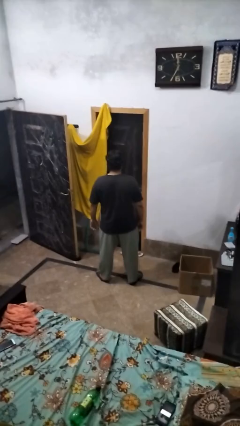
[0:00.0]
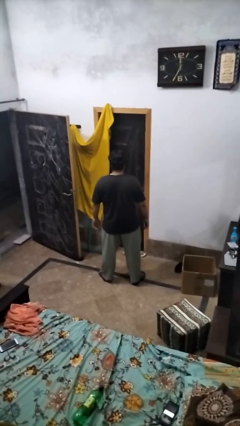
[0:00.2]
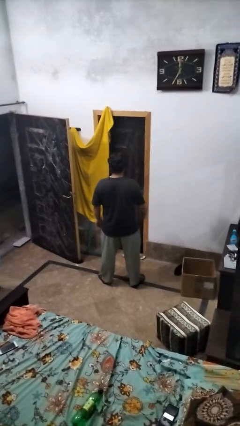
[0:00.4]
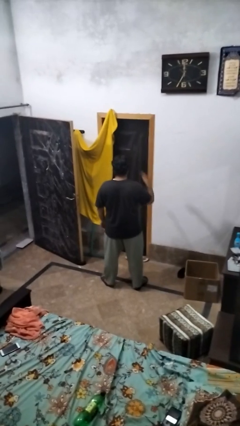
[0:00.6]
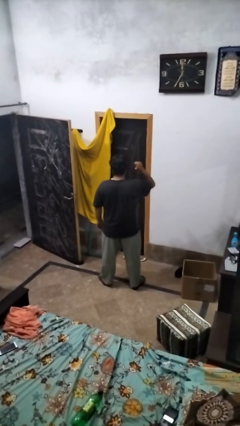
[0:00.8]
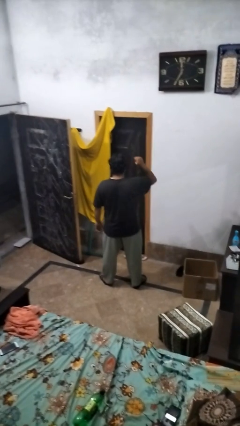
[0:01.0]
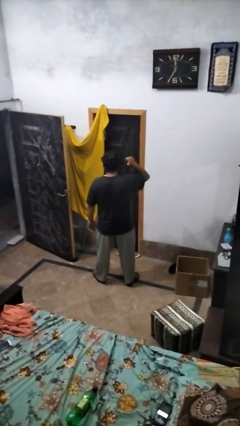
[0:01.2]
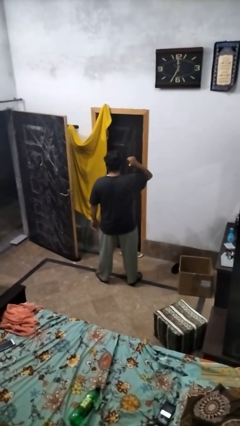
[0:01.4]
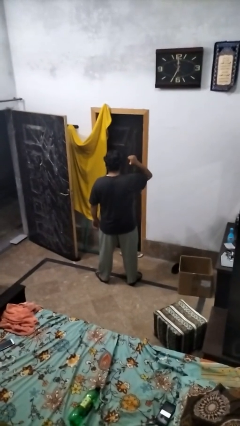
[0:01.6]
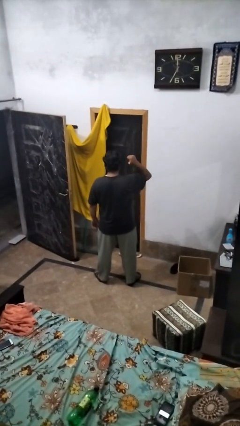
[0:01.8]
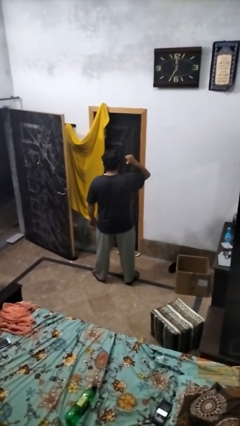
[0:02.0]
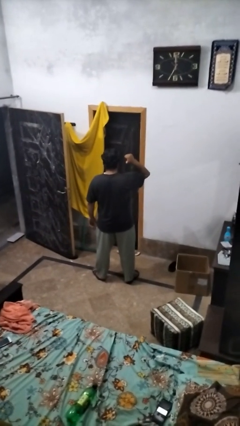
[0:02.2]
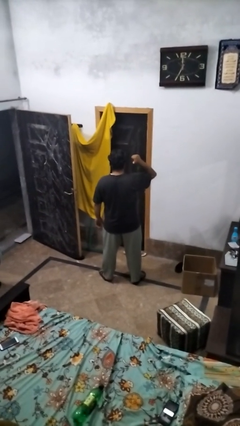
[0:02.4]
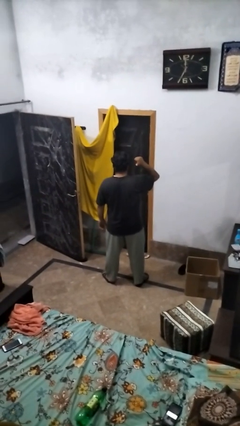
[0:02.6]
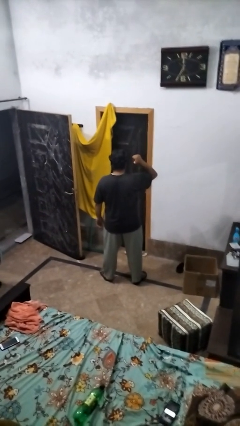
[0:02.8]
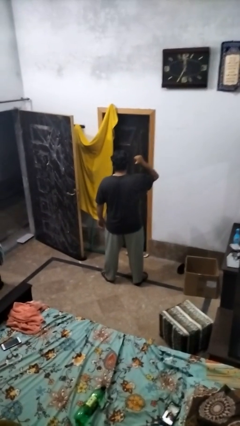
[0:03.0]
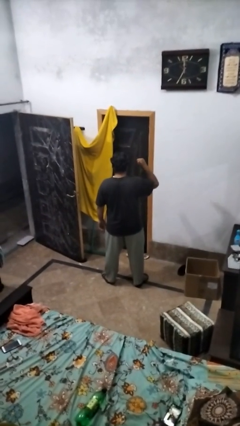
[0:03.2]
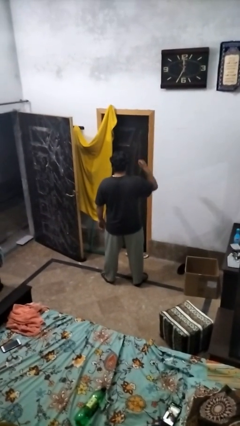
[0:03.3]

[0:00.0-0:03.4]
person gestures behind me

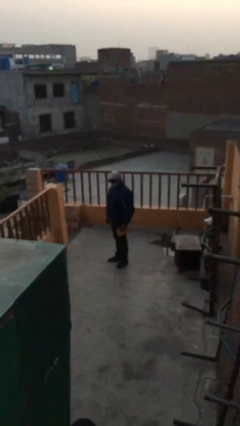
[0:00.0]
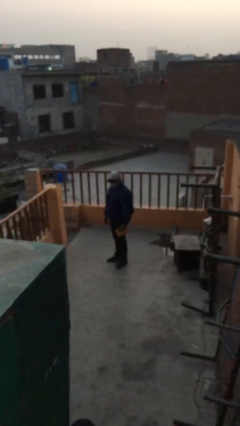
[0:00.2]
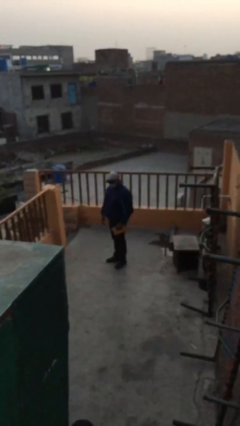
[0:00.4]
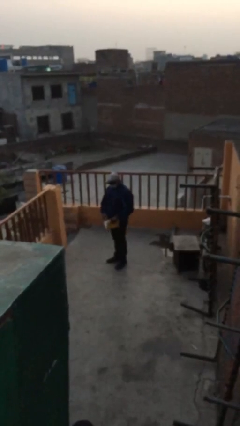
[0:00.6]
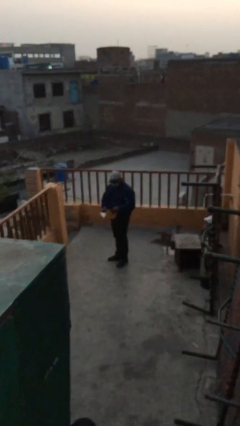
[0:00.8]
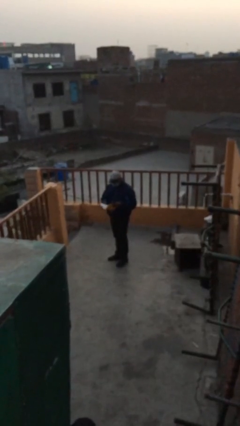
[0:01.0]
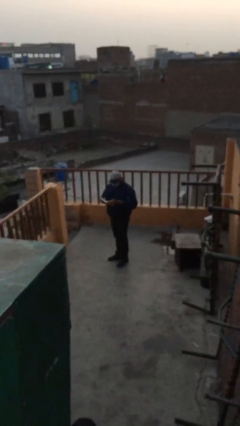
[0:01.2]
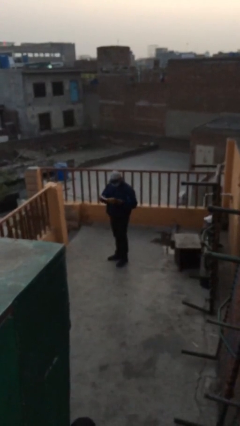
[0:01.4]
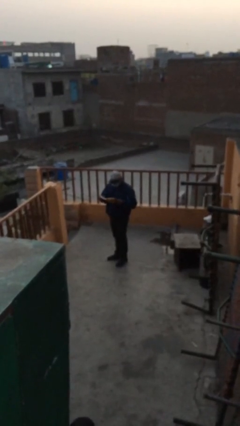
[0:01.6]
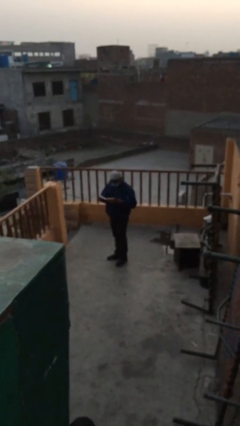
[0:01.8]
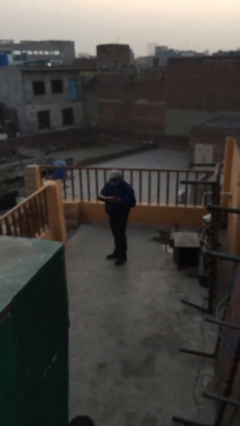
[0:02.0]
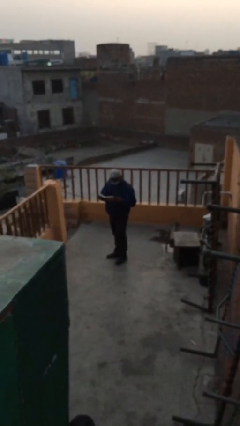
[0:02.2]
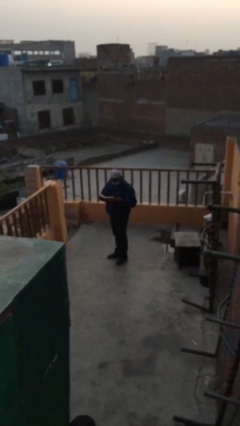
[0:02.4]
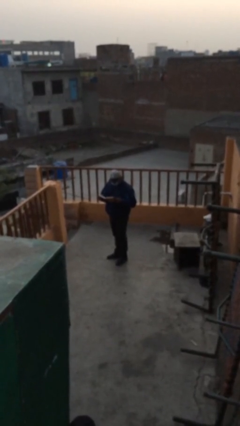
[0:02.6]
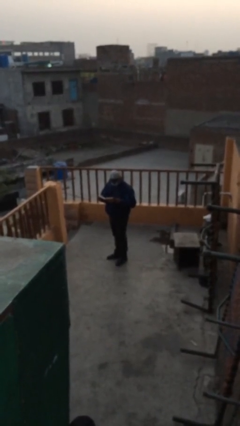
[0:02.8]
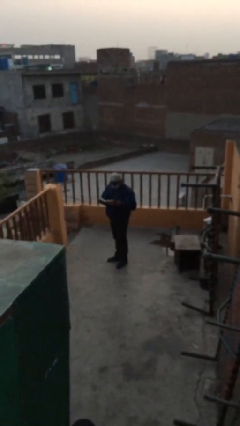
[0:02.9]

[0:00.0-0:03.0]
person reads document

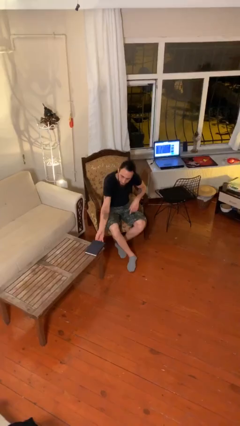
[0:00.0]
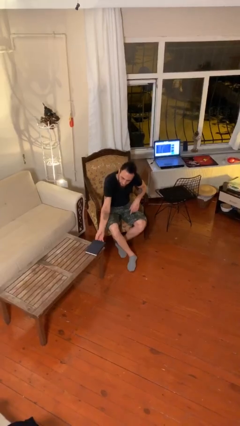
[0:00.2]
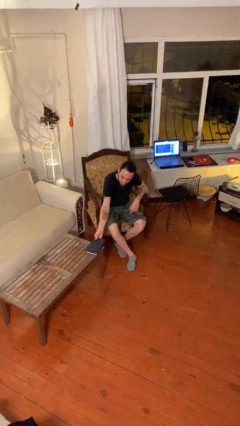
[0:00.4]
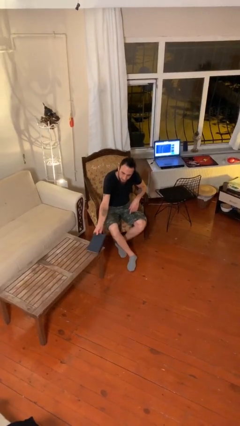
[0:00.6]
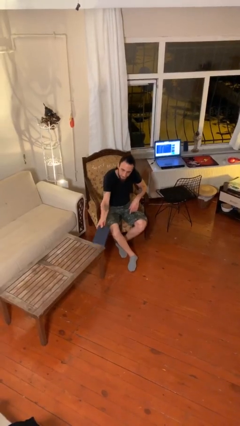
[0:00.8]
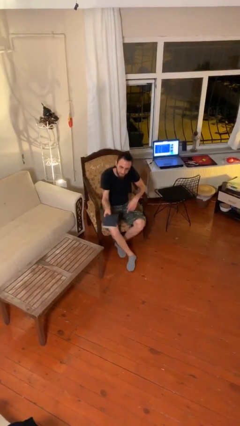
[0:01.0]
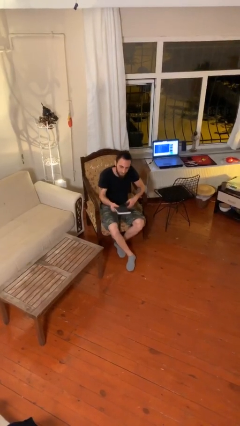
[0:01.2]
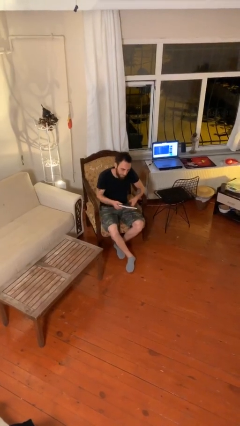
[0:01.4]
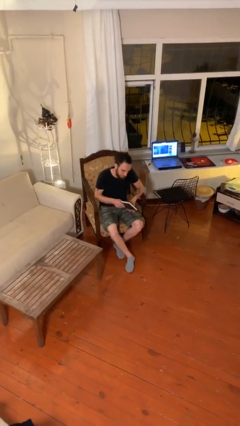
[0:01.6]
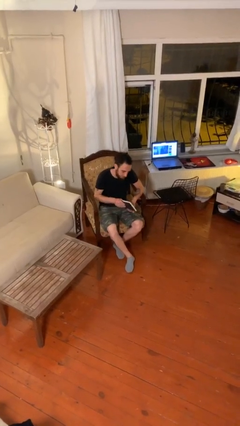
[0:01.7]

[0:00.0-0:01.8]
person picks up object from table

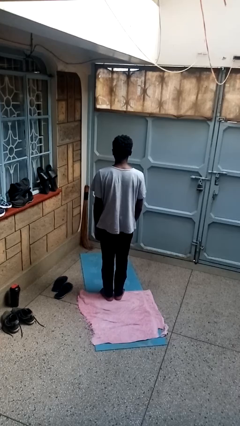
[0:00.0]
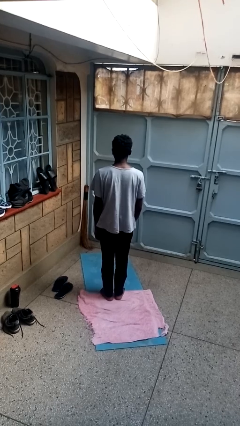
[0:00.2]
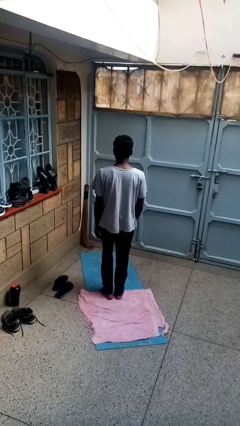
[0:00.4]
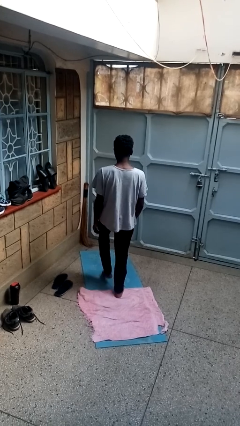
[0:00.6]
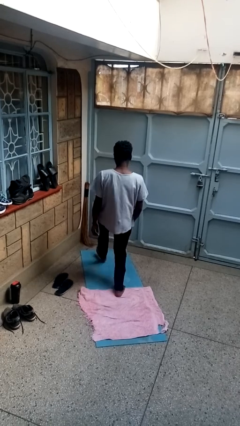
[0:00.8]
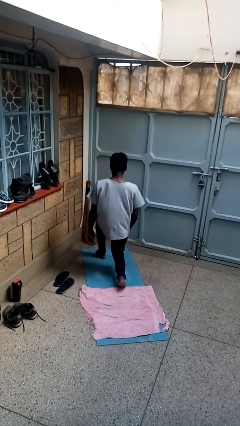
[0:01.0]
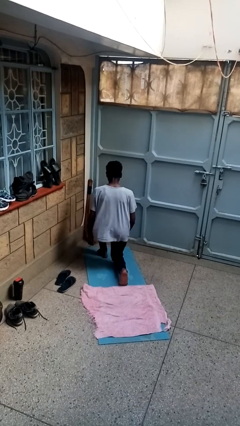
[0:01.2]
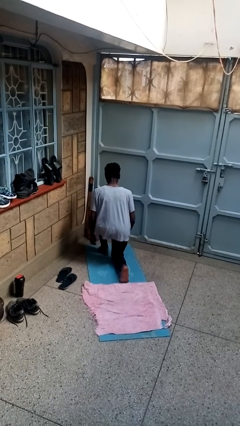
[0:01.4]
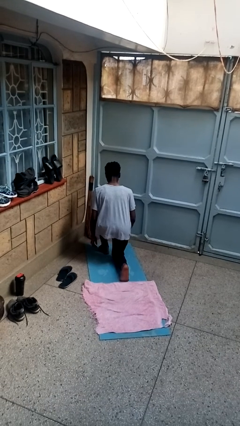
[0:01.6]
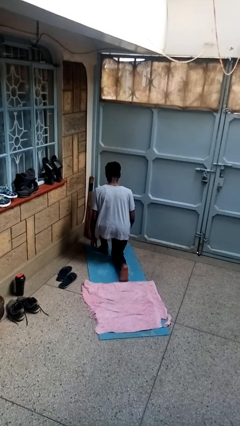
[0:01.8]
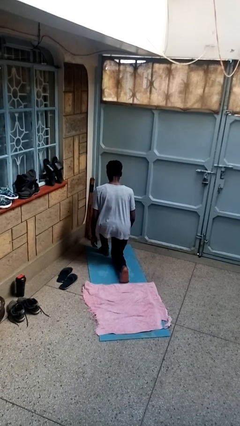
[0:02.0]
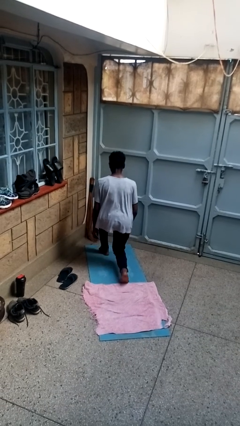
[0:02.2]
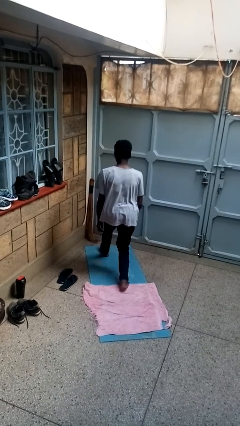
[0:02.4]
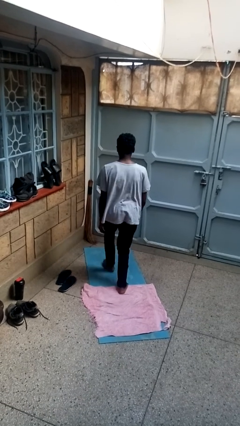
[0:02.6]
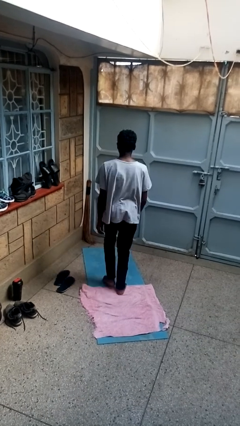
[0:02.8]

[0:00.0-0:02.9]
person exercises with lunges

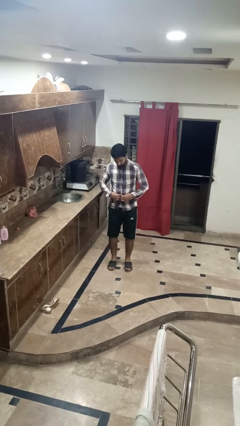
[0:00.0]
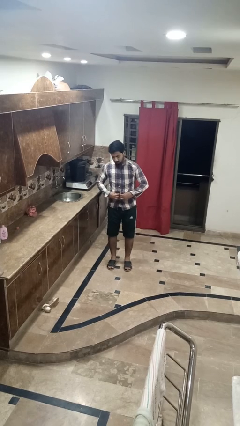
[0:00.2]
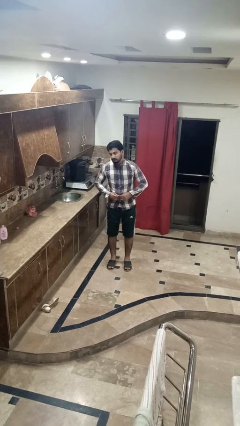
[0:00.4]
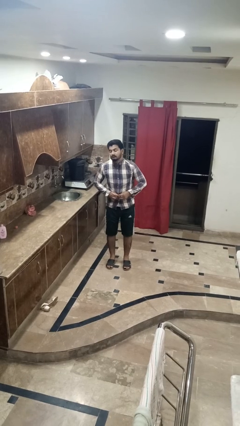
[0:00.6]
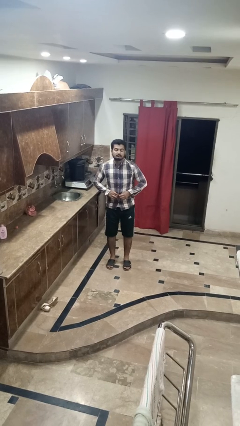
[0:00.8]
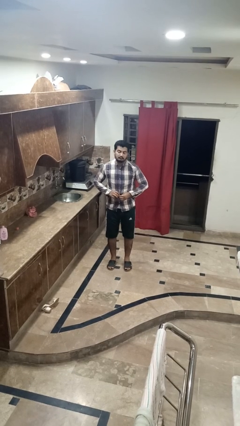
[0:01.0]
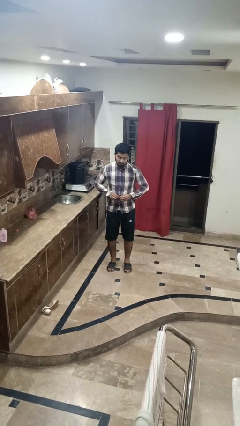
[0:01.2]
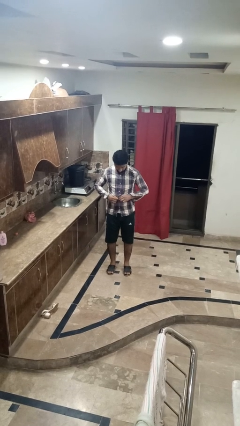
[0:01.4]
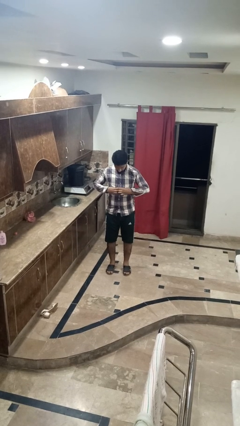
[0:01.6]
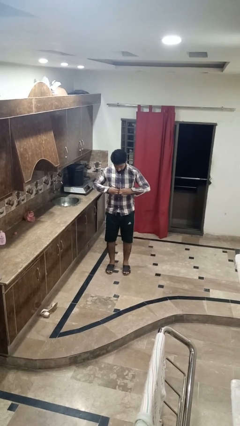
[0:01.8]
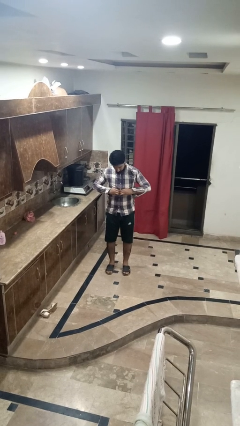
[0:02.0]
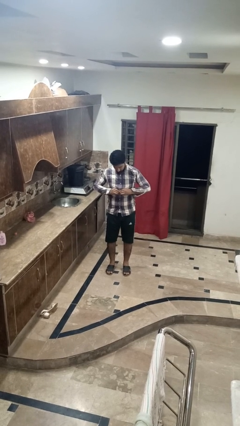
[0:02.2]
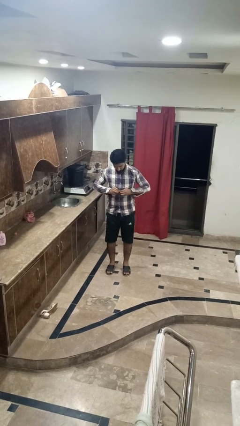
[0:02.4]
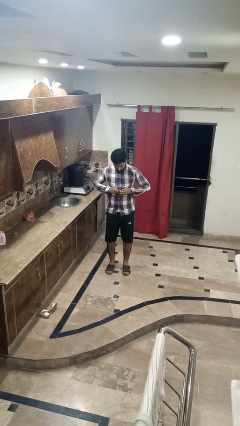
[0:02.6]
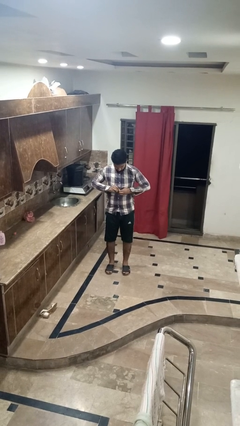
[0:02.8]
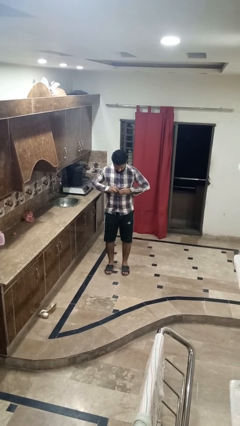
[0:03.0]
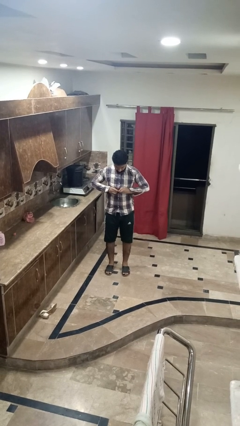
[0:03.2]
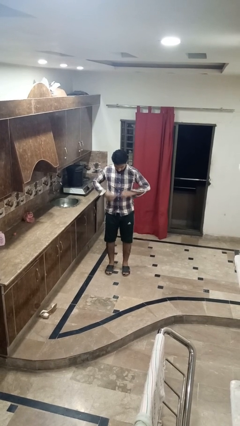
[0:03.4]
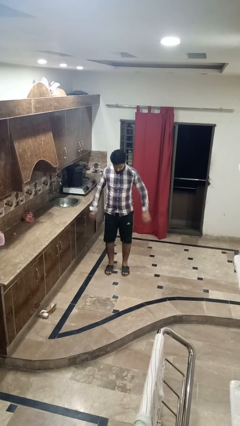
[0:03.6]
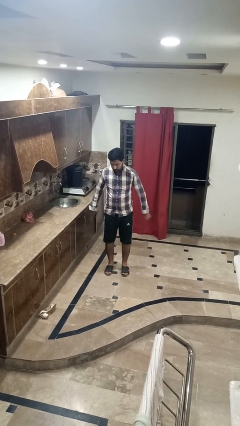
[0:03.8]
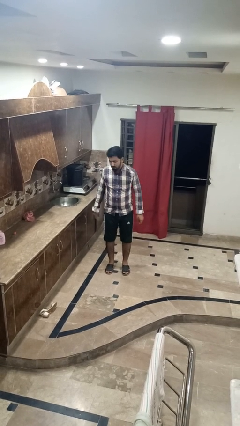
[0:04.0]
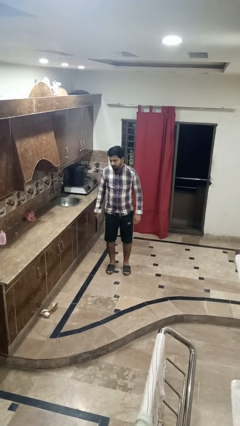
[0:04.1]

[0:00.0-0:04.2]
person buttons shirt

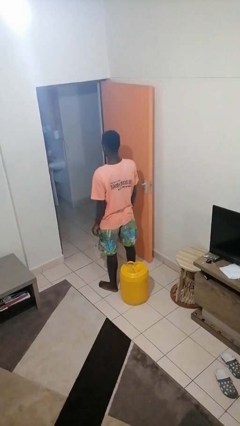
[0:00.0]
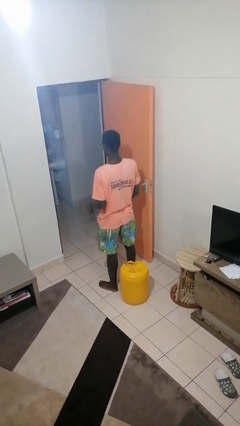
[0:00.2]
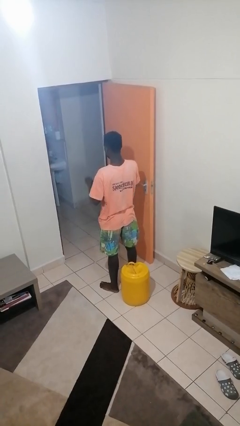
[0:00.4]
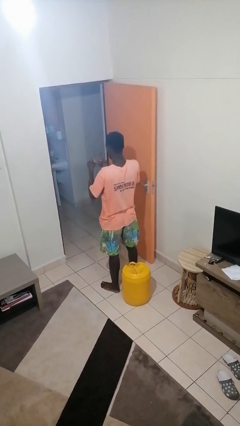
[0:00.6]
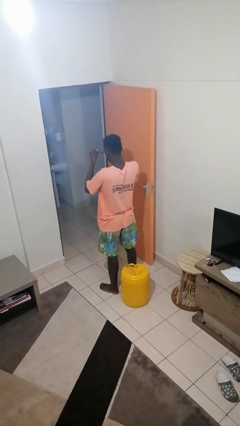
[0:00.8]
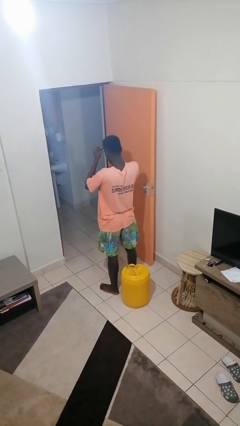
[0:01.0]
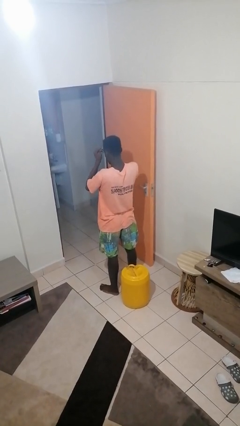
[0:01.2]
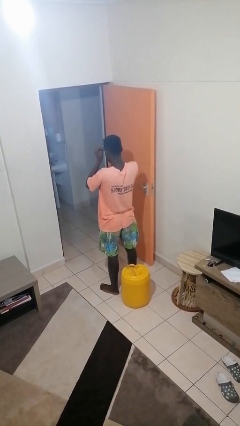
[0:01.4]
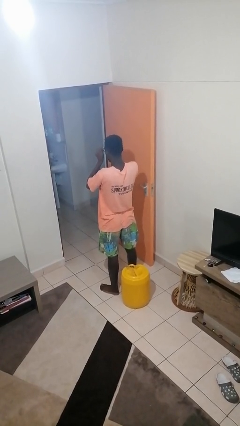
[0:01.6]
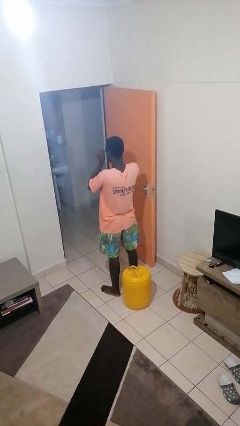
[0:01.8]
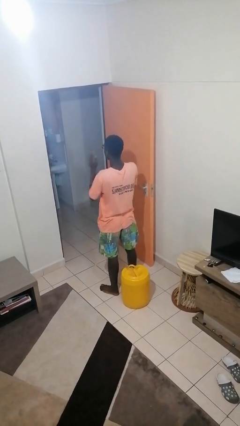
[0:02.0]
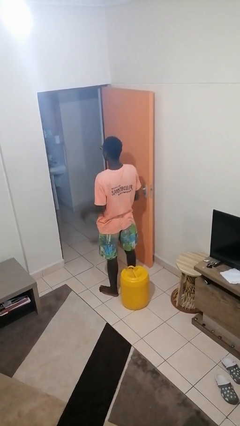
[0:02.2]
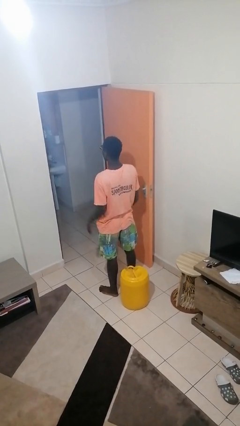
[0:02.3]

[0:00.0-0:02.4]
person puts on glasses
